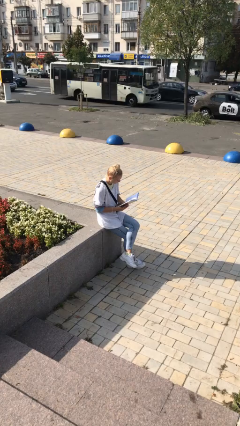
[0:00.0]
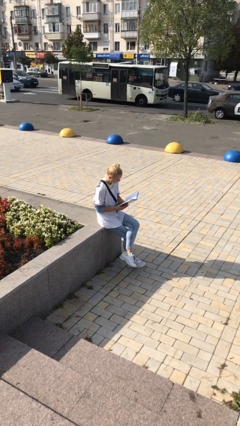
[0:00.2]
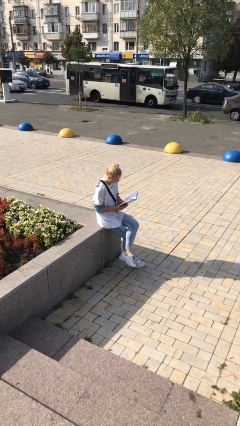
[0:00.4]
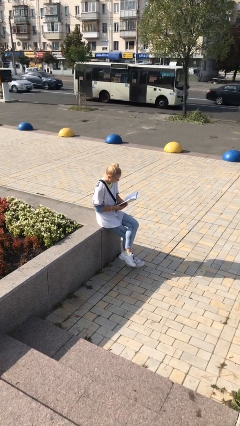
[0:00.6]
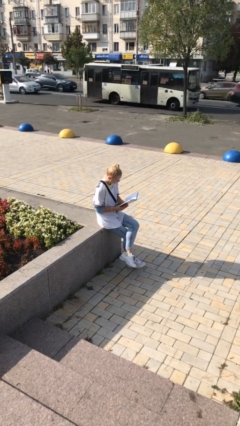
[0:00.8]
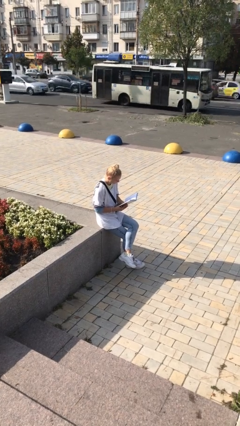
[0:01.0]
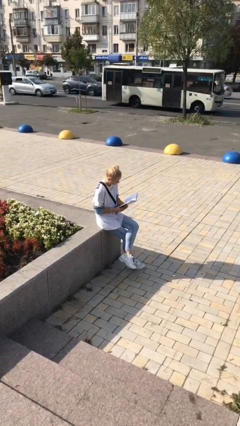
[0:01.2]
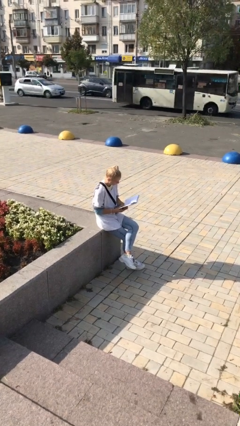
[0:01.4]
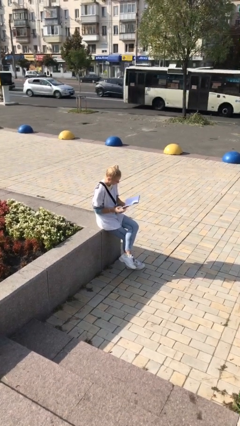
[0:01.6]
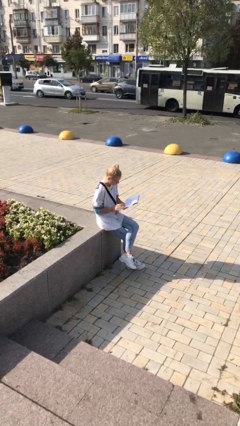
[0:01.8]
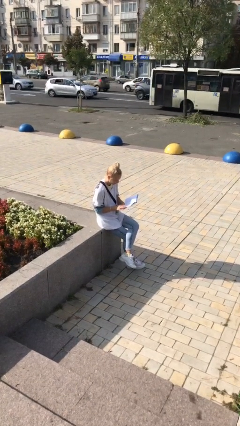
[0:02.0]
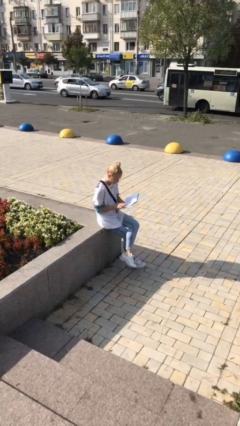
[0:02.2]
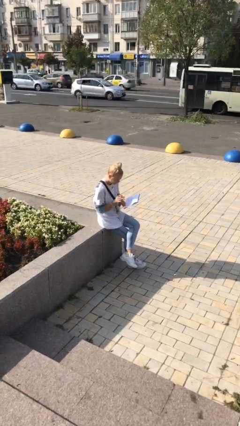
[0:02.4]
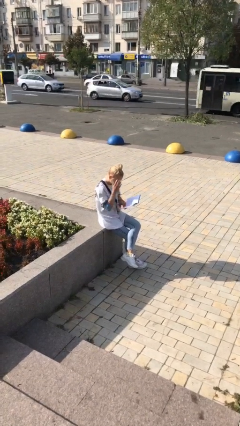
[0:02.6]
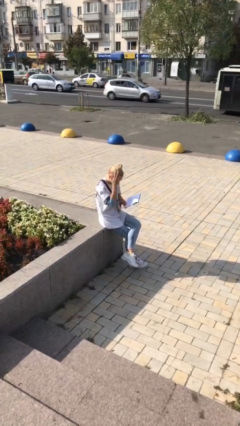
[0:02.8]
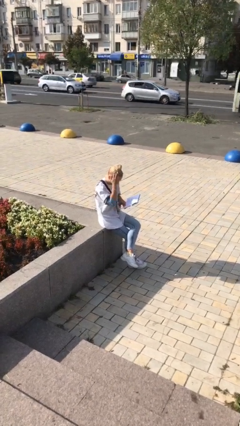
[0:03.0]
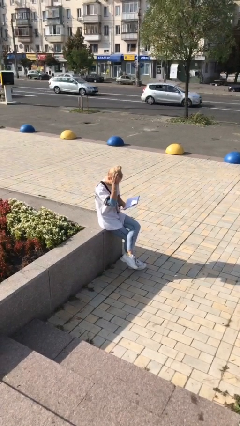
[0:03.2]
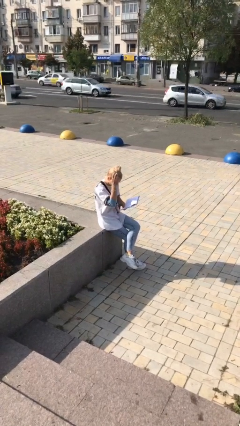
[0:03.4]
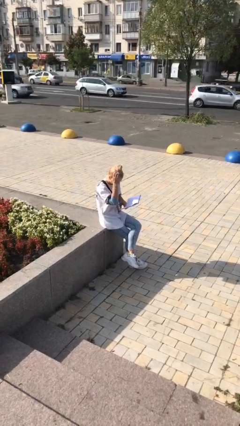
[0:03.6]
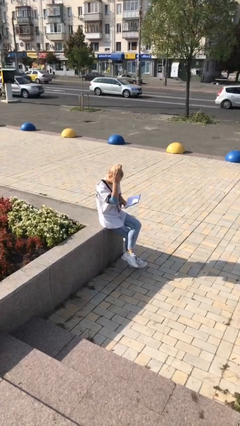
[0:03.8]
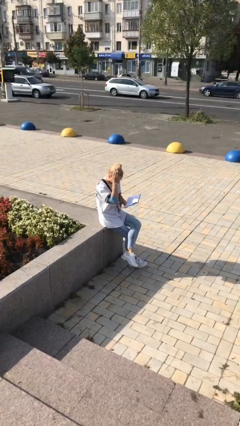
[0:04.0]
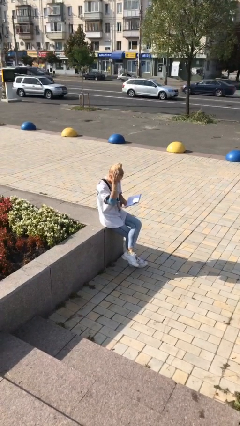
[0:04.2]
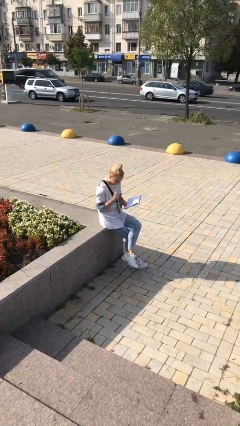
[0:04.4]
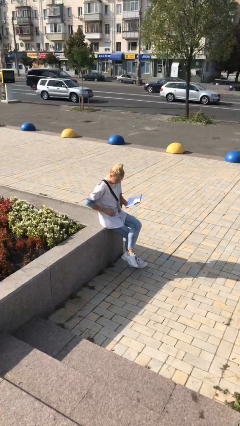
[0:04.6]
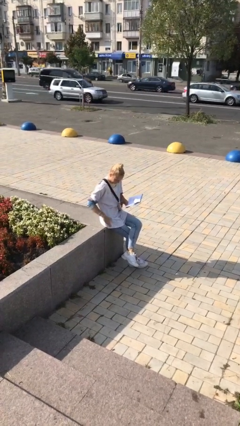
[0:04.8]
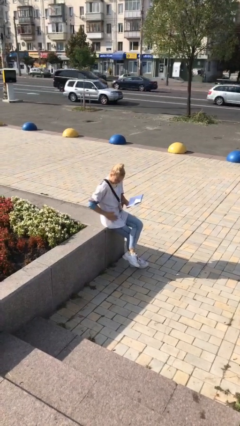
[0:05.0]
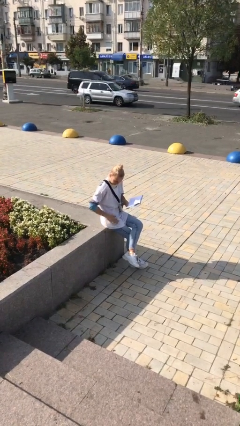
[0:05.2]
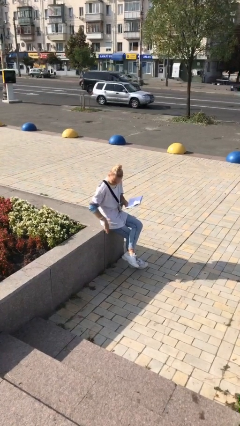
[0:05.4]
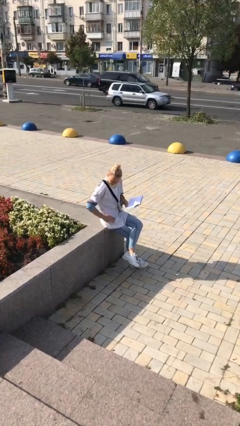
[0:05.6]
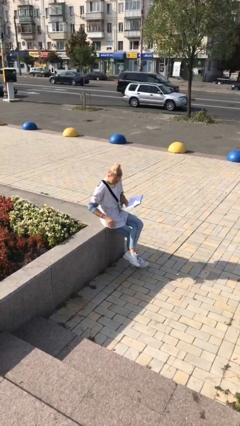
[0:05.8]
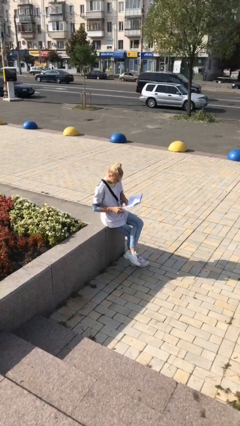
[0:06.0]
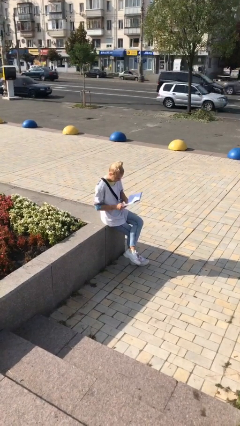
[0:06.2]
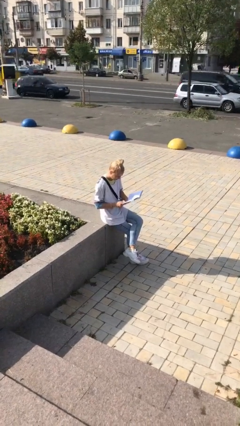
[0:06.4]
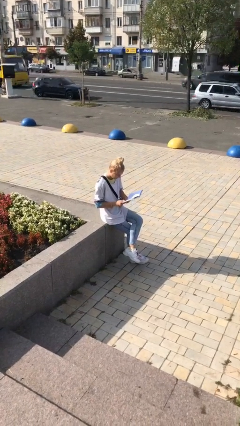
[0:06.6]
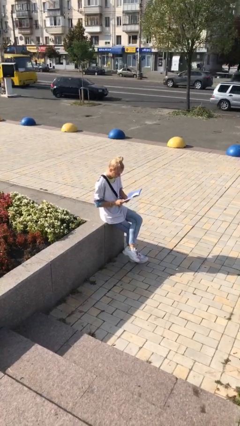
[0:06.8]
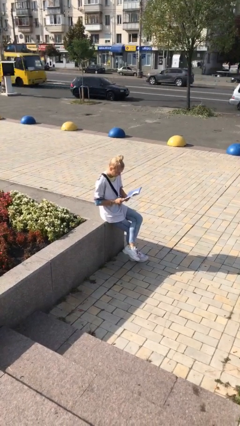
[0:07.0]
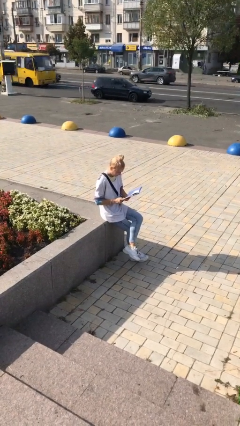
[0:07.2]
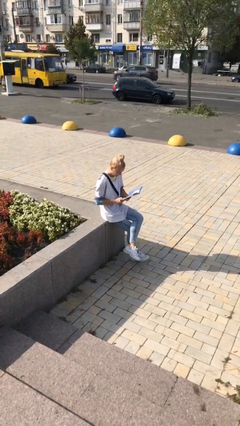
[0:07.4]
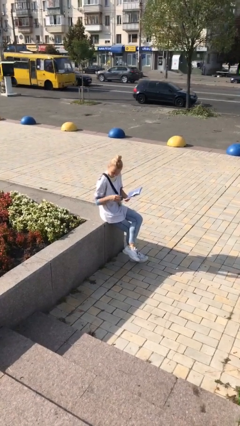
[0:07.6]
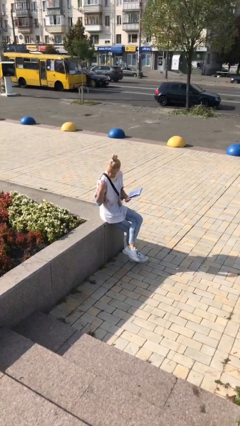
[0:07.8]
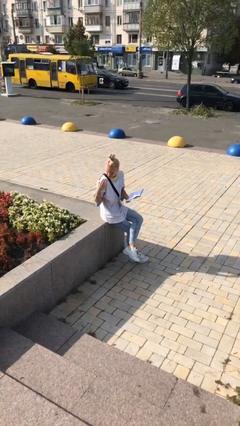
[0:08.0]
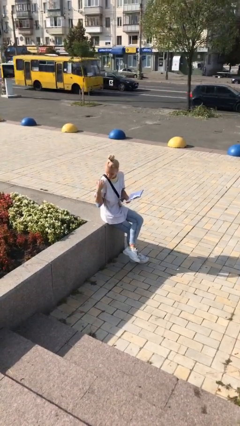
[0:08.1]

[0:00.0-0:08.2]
person reads document

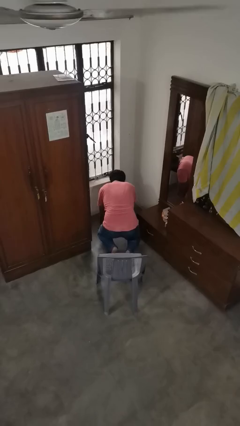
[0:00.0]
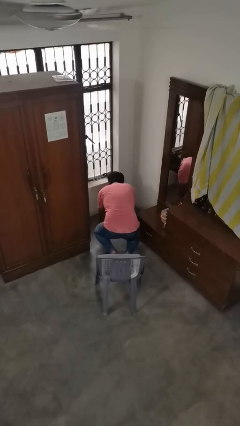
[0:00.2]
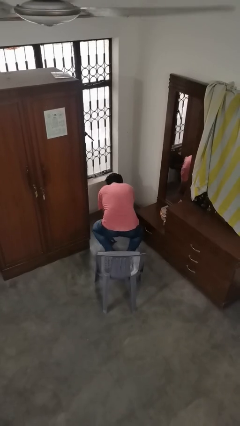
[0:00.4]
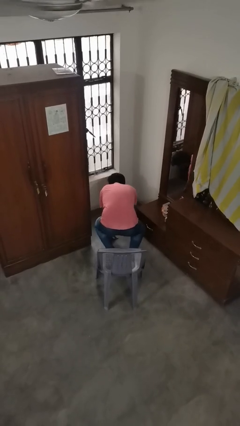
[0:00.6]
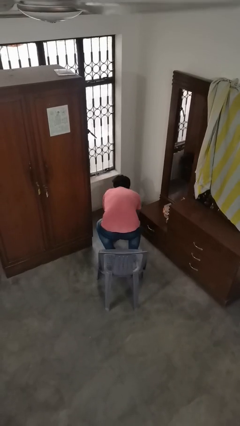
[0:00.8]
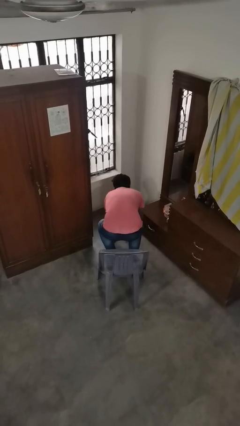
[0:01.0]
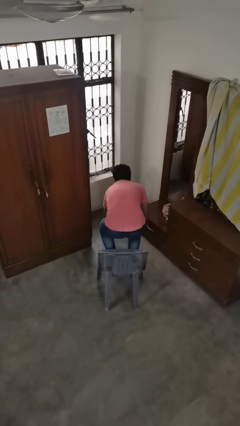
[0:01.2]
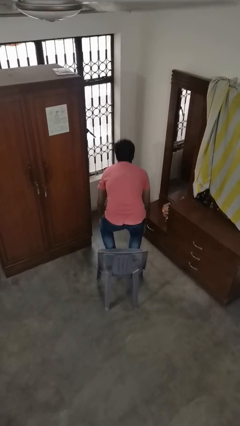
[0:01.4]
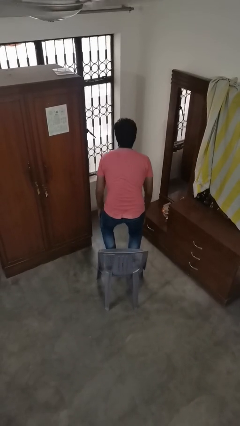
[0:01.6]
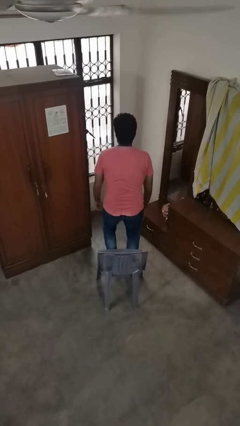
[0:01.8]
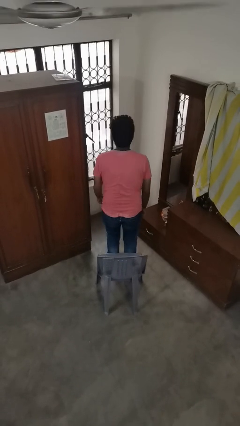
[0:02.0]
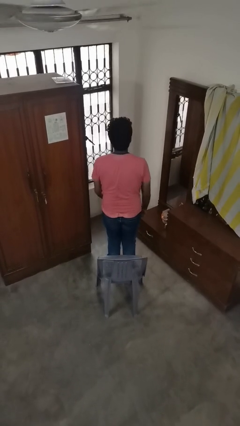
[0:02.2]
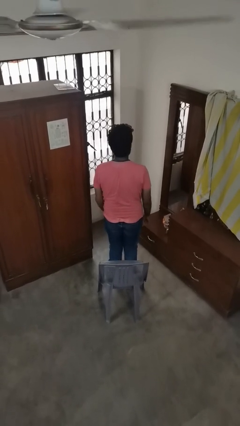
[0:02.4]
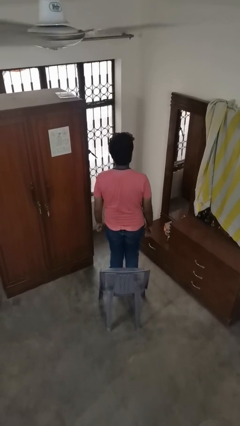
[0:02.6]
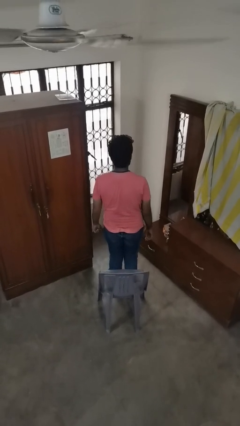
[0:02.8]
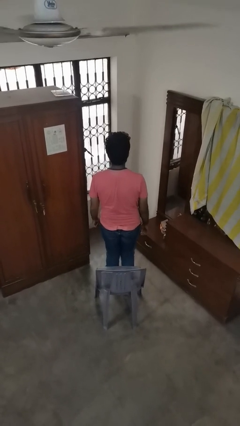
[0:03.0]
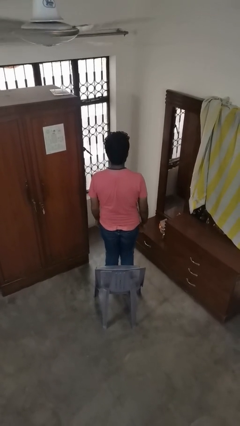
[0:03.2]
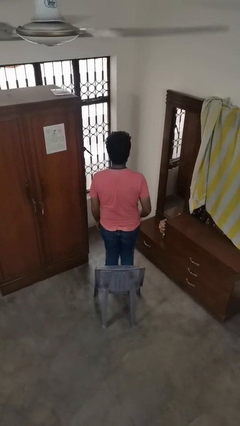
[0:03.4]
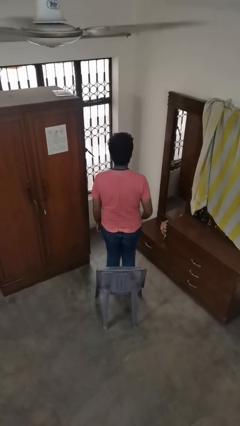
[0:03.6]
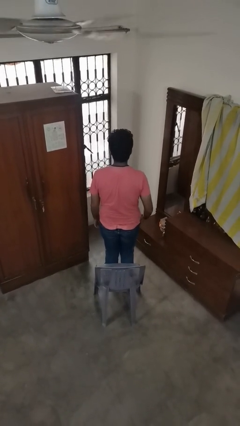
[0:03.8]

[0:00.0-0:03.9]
person stands up from floor

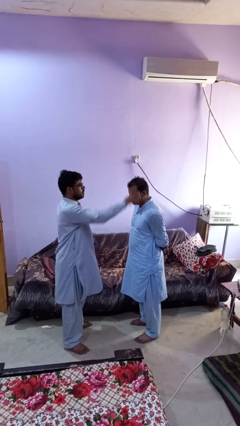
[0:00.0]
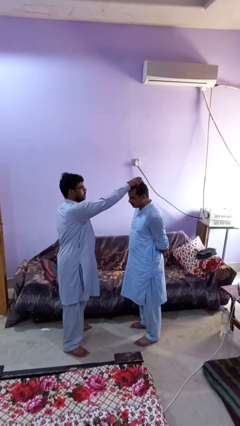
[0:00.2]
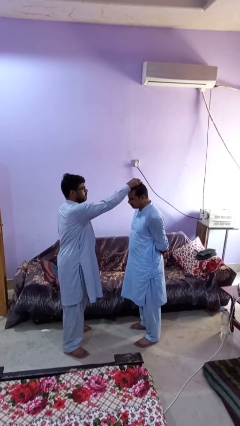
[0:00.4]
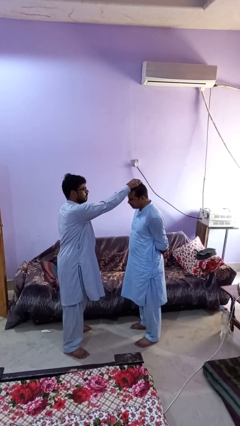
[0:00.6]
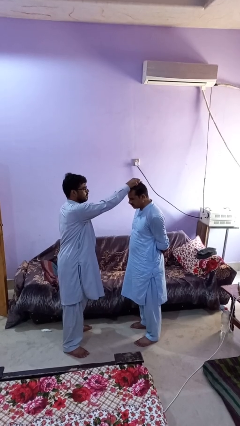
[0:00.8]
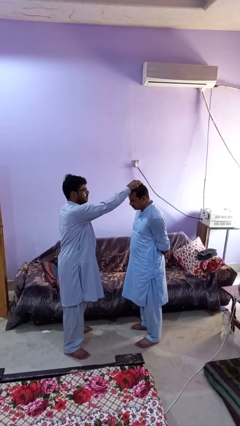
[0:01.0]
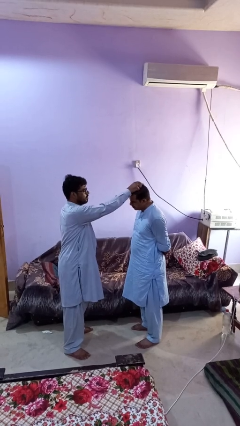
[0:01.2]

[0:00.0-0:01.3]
person grabs person by hair

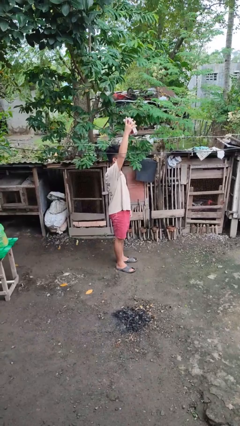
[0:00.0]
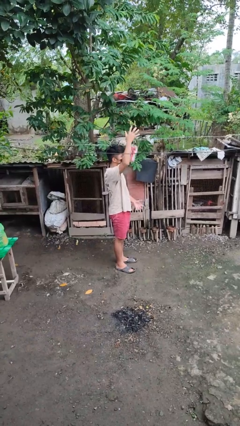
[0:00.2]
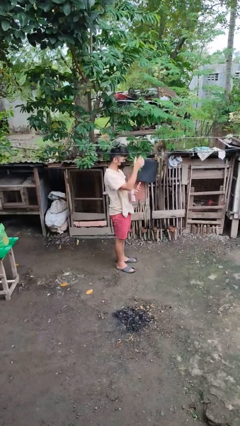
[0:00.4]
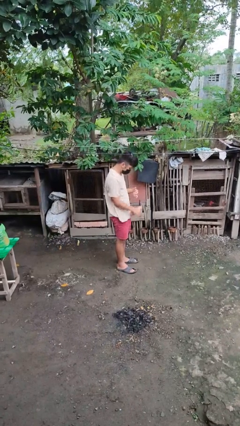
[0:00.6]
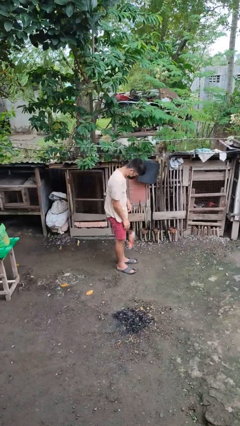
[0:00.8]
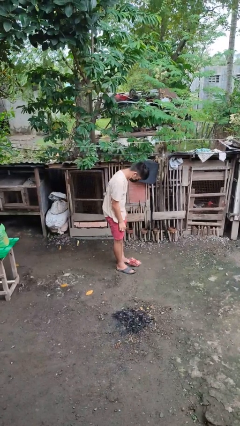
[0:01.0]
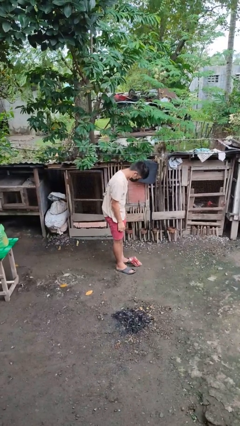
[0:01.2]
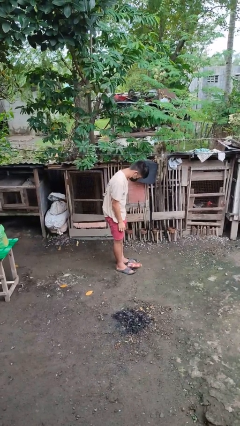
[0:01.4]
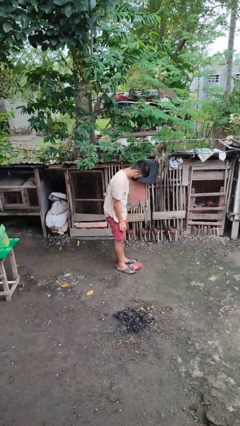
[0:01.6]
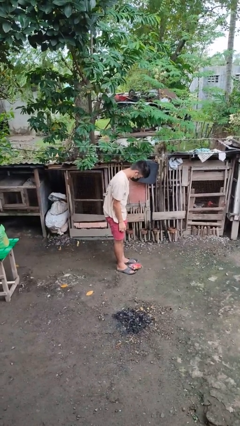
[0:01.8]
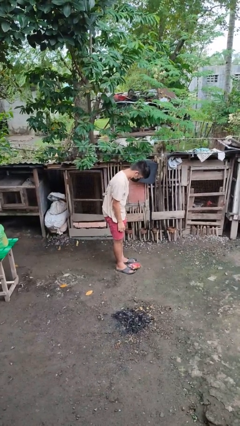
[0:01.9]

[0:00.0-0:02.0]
person drops object

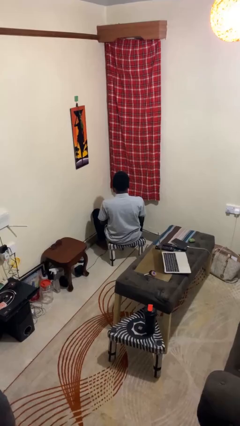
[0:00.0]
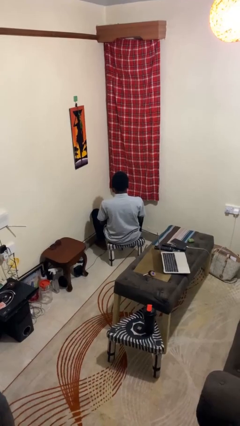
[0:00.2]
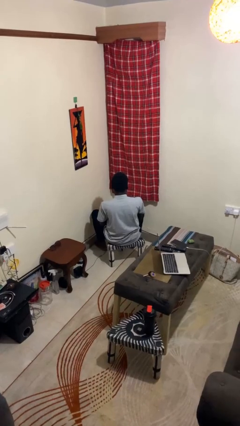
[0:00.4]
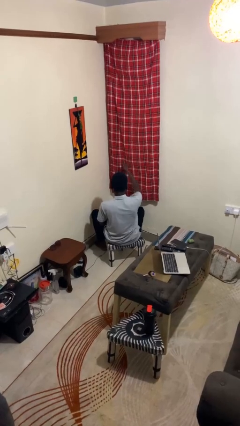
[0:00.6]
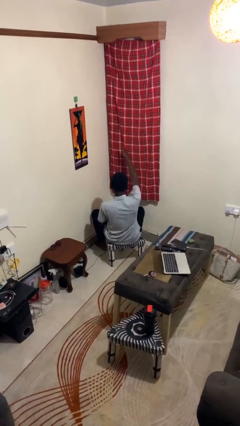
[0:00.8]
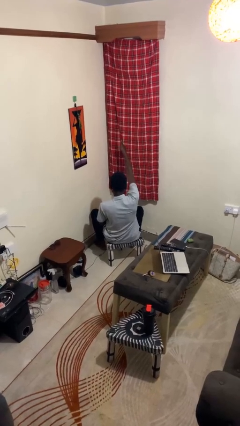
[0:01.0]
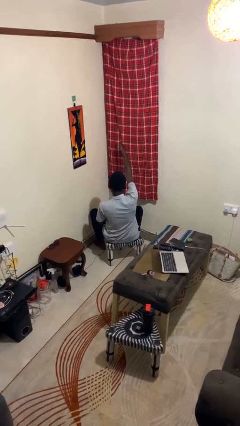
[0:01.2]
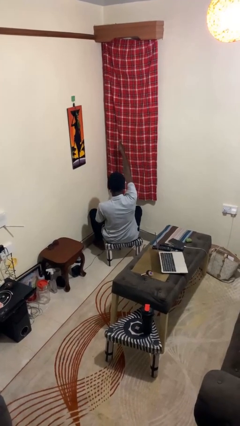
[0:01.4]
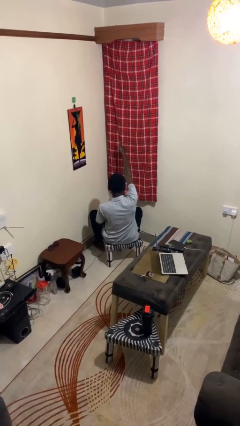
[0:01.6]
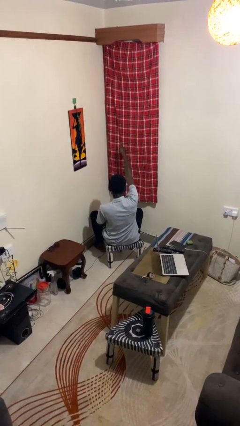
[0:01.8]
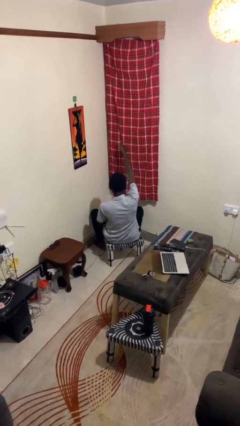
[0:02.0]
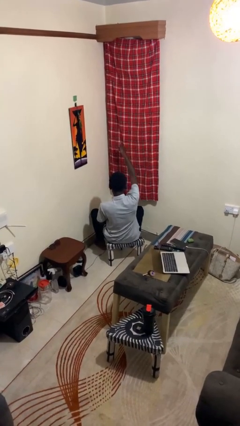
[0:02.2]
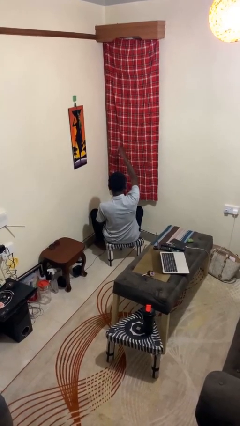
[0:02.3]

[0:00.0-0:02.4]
person gestures thumbs up
